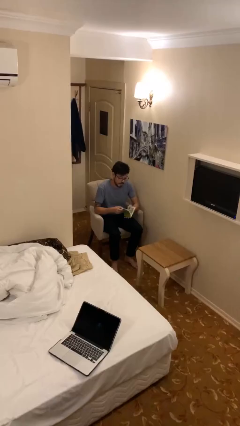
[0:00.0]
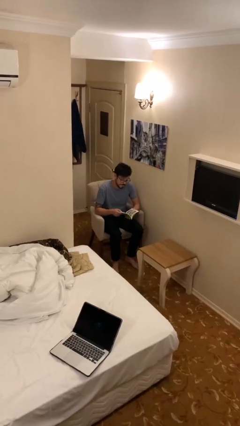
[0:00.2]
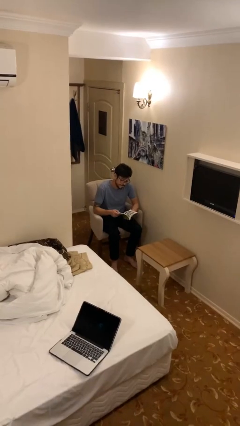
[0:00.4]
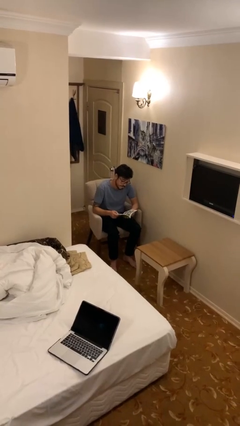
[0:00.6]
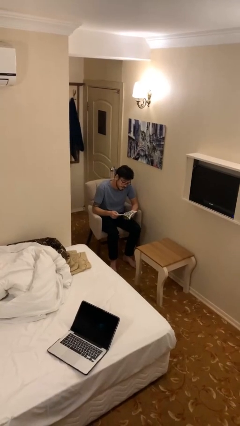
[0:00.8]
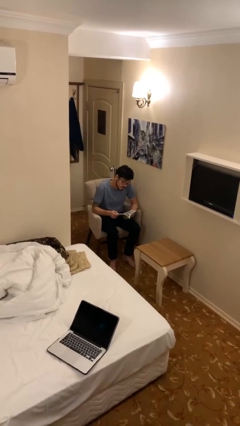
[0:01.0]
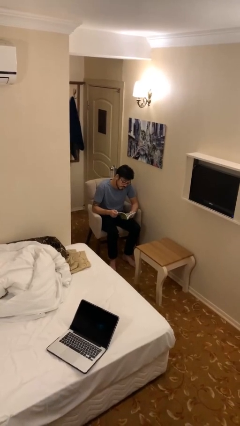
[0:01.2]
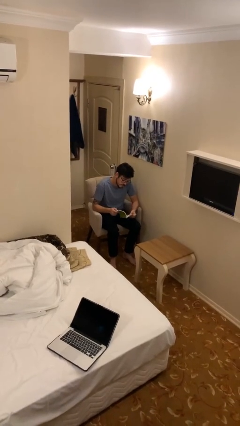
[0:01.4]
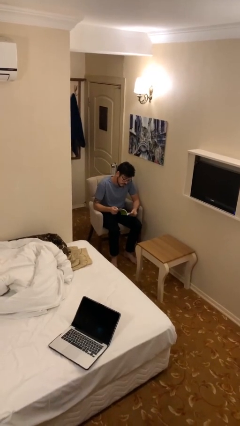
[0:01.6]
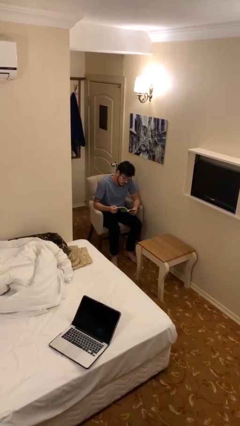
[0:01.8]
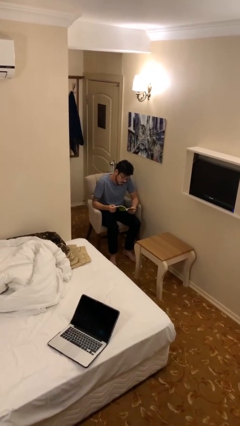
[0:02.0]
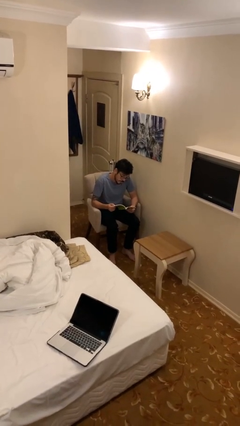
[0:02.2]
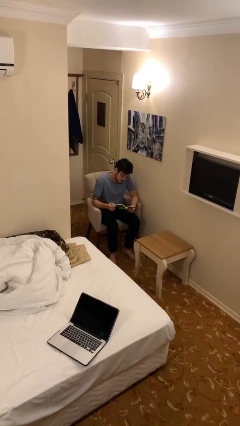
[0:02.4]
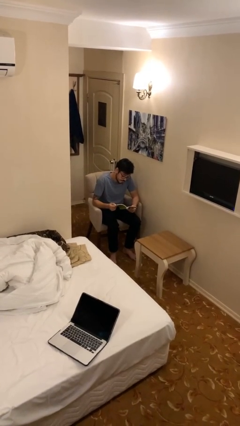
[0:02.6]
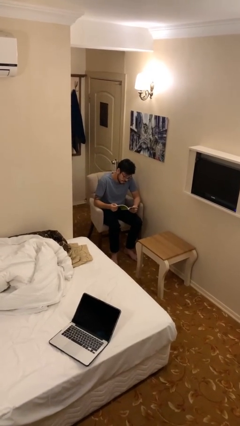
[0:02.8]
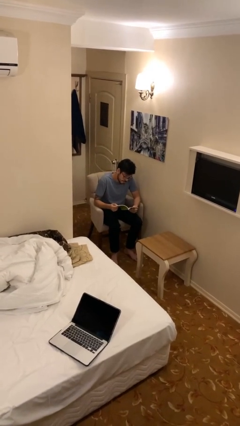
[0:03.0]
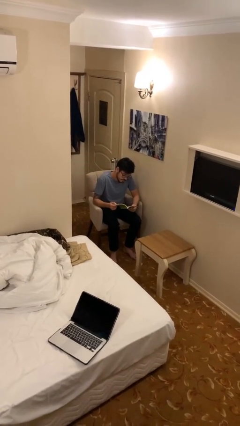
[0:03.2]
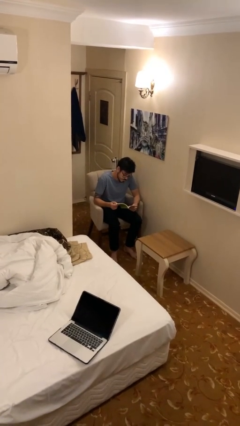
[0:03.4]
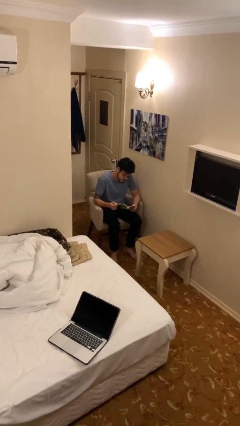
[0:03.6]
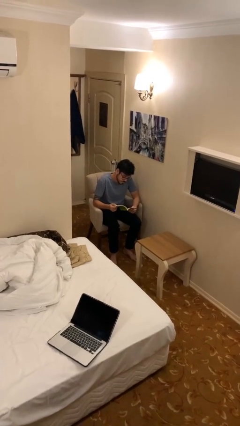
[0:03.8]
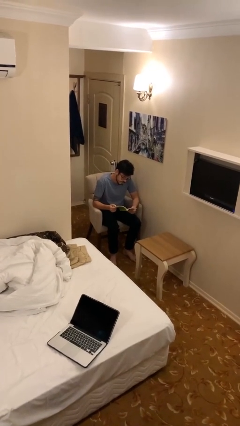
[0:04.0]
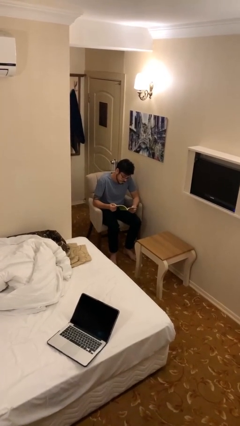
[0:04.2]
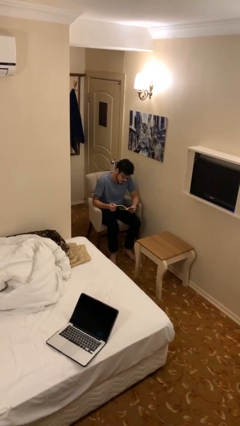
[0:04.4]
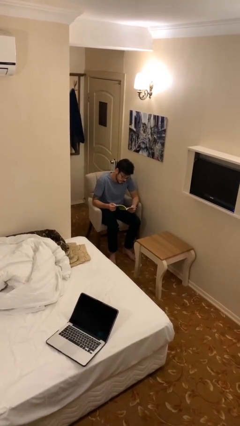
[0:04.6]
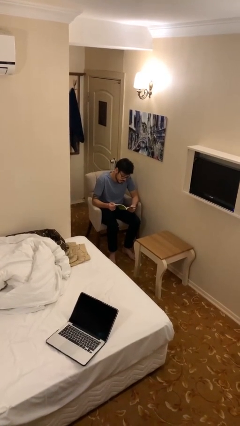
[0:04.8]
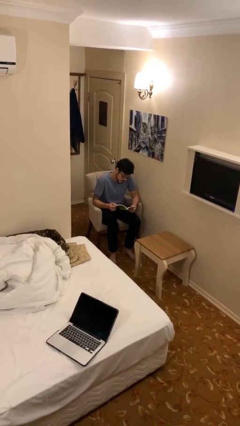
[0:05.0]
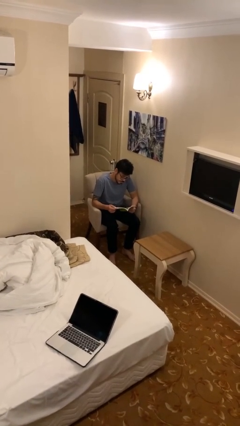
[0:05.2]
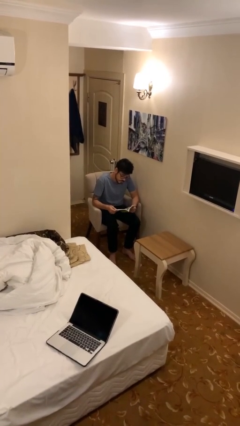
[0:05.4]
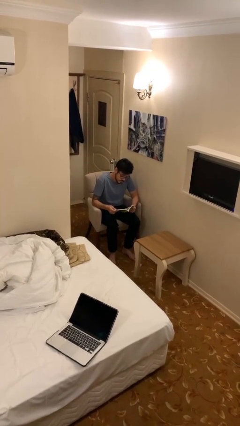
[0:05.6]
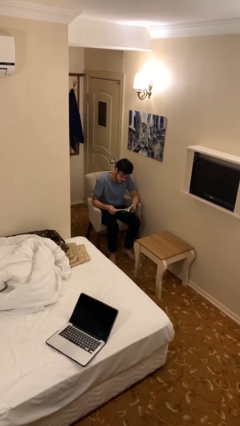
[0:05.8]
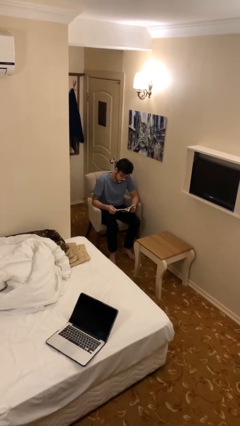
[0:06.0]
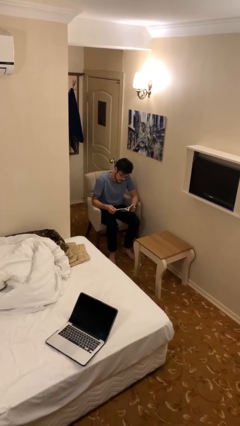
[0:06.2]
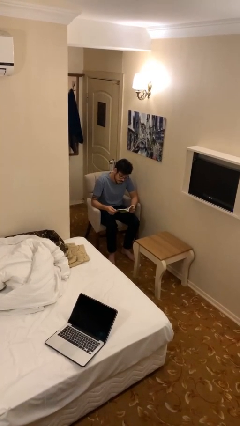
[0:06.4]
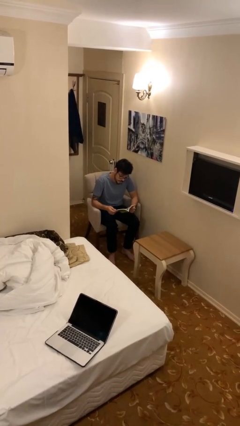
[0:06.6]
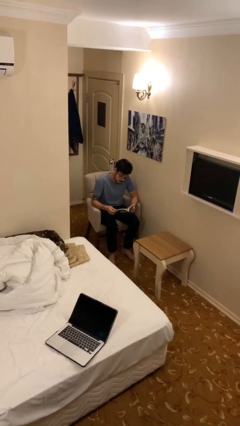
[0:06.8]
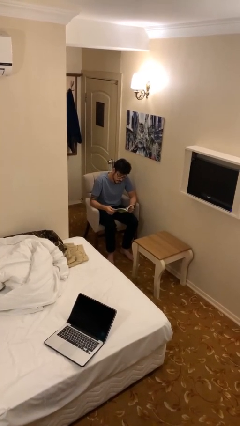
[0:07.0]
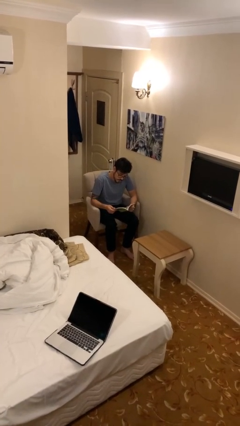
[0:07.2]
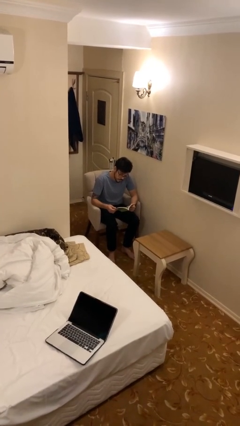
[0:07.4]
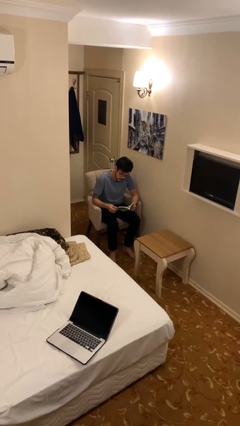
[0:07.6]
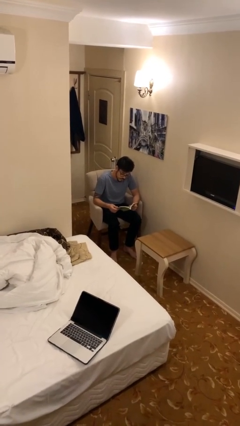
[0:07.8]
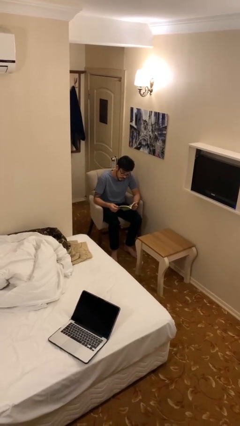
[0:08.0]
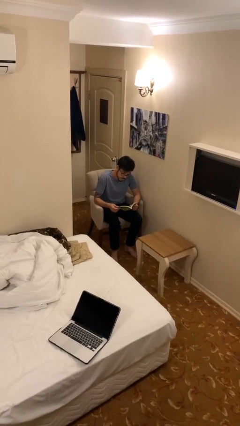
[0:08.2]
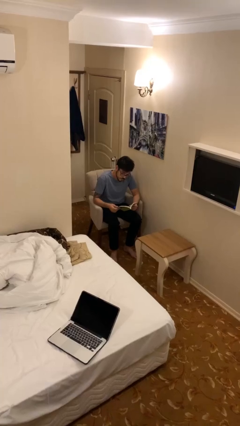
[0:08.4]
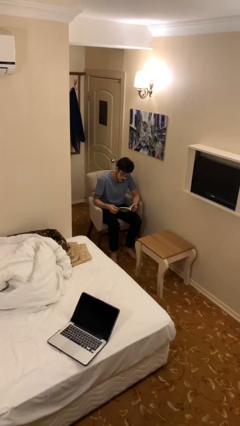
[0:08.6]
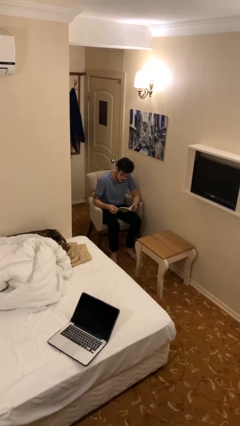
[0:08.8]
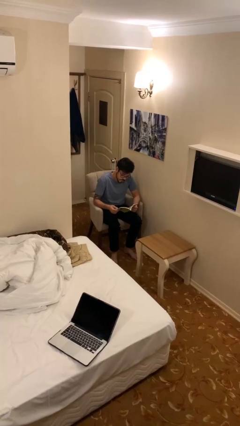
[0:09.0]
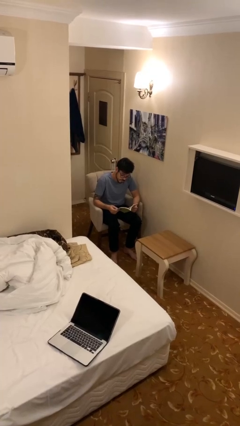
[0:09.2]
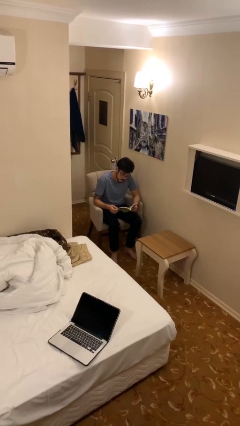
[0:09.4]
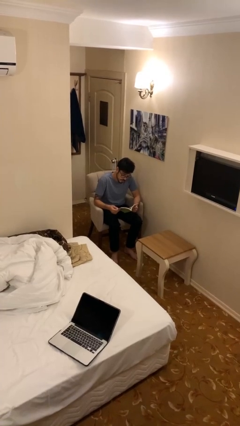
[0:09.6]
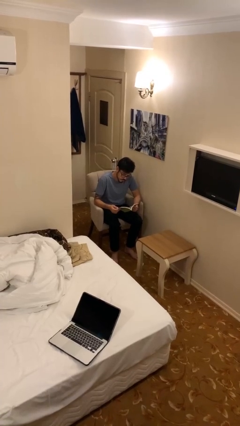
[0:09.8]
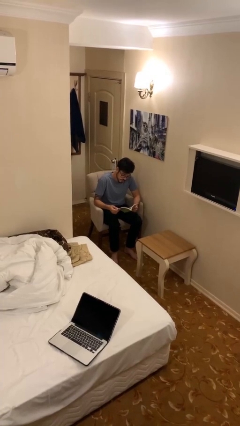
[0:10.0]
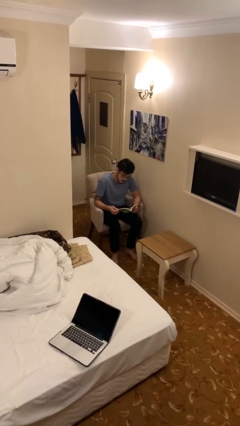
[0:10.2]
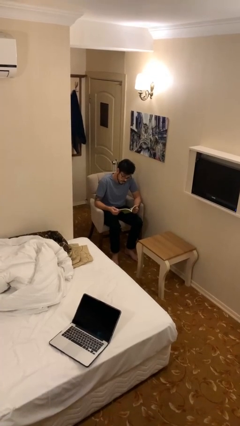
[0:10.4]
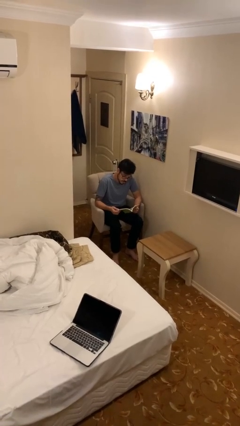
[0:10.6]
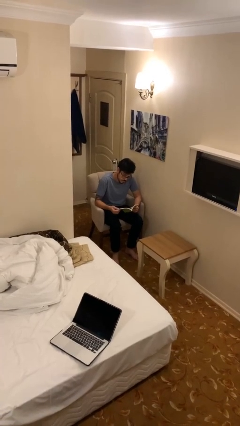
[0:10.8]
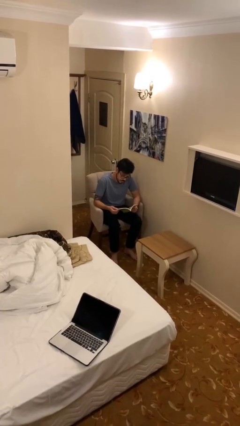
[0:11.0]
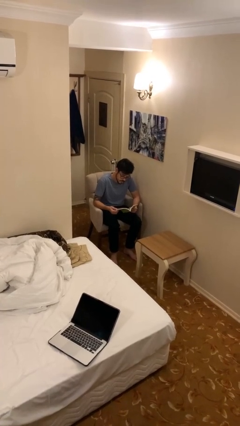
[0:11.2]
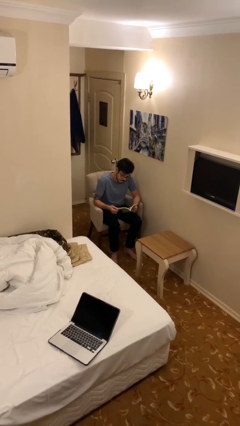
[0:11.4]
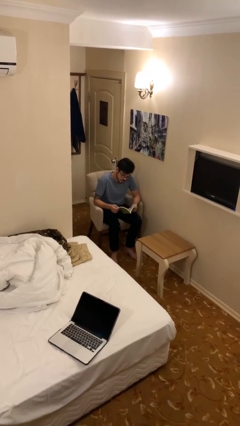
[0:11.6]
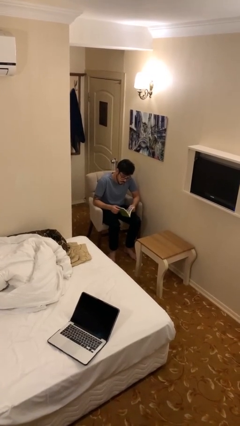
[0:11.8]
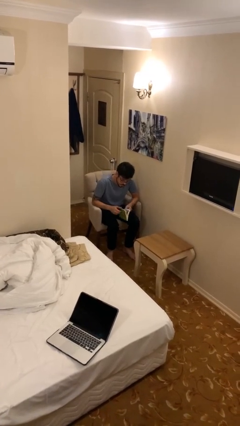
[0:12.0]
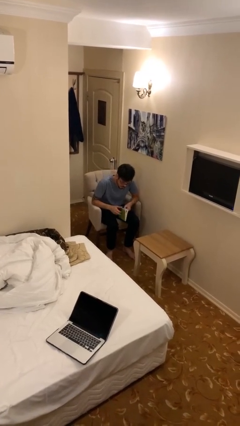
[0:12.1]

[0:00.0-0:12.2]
person reads document

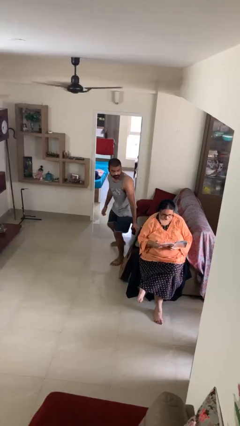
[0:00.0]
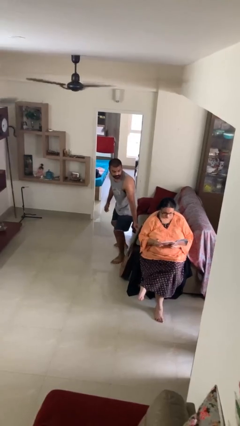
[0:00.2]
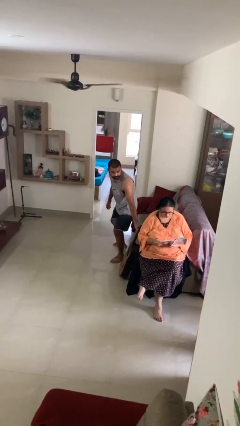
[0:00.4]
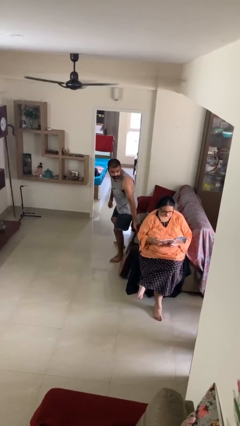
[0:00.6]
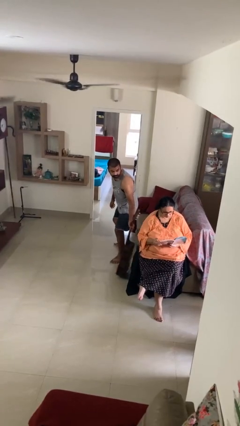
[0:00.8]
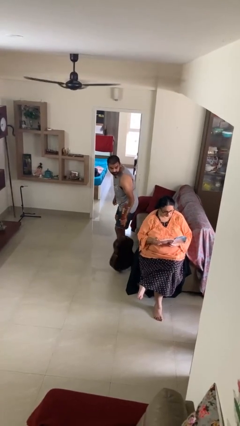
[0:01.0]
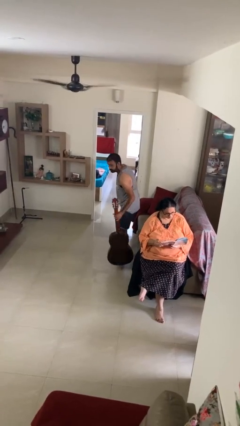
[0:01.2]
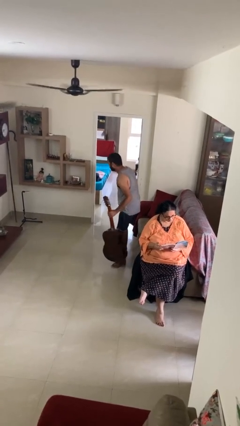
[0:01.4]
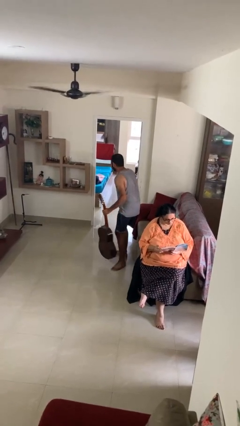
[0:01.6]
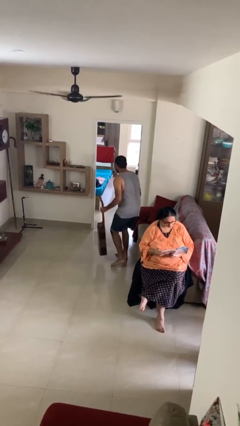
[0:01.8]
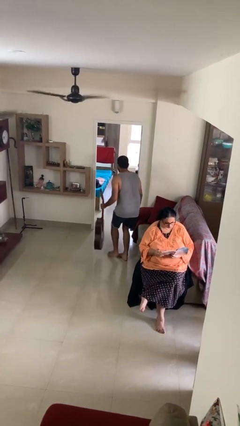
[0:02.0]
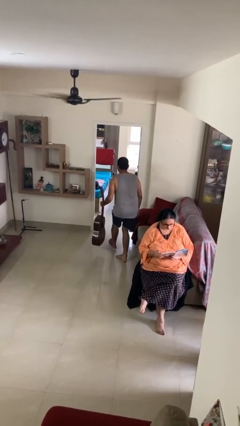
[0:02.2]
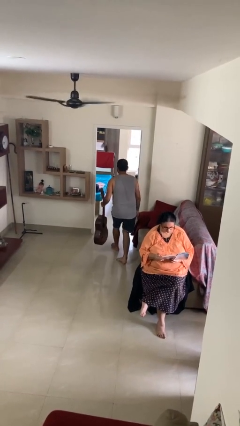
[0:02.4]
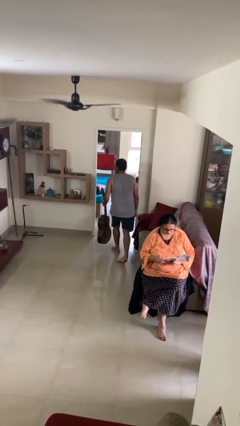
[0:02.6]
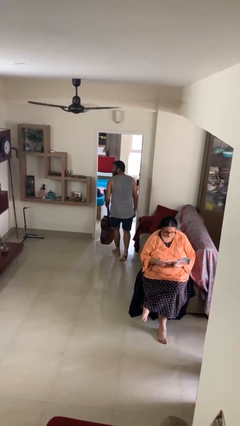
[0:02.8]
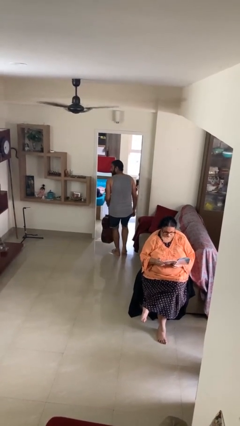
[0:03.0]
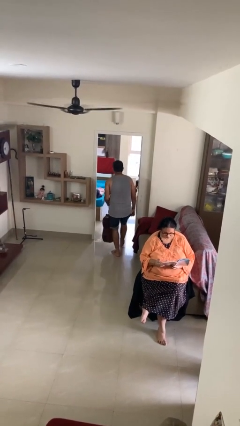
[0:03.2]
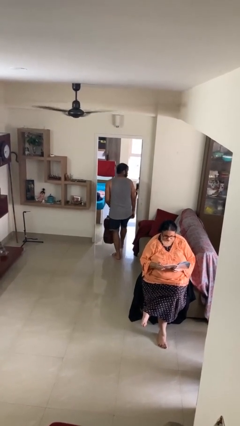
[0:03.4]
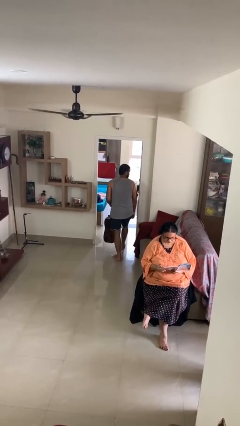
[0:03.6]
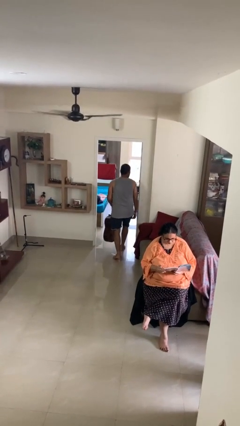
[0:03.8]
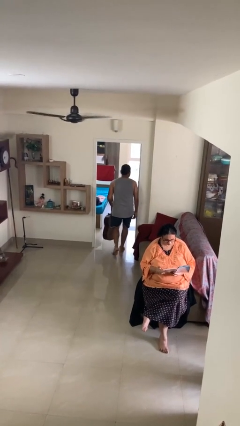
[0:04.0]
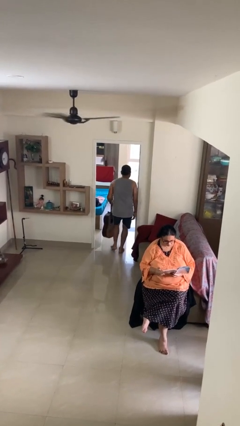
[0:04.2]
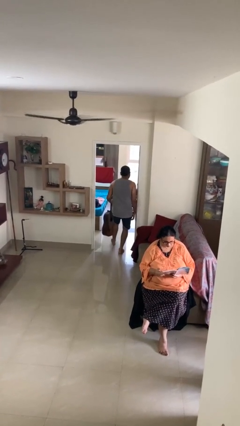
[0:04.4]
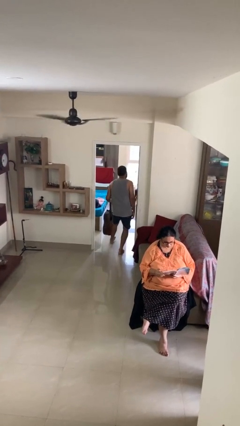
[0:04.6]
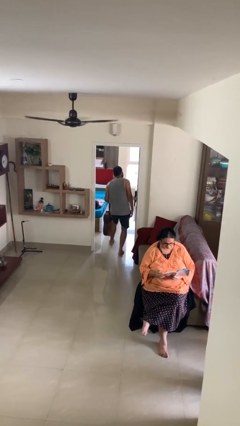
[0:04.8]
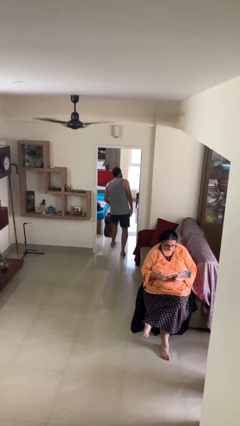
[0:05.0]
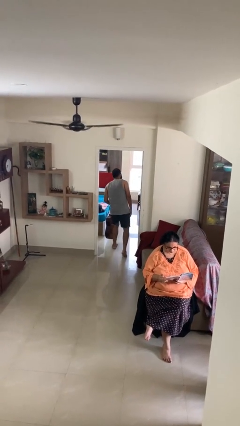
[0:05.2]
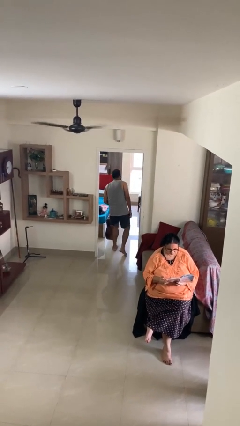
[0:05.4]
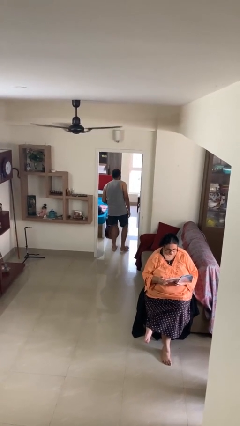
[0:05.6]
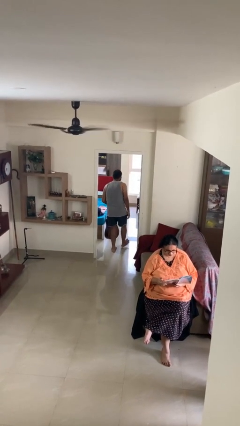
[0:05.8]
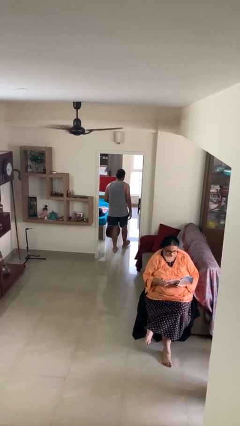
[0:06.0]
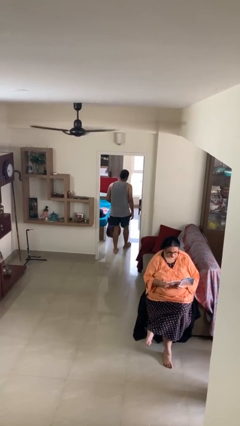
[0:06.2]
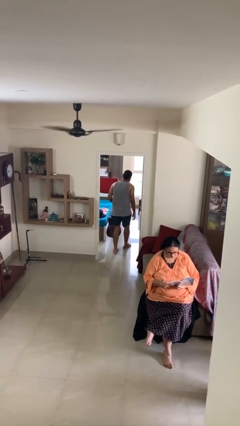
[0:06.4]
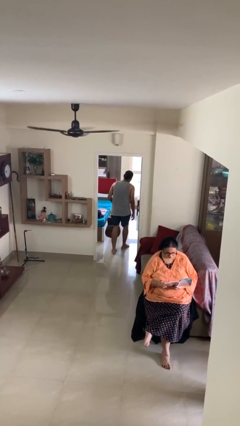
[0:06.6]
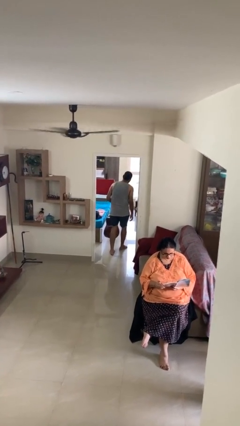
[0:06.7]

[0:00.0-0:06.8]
person steals object from person
